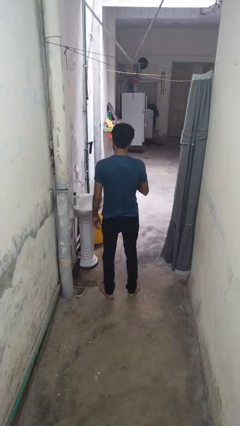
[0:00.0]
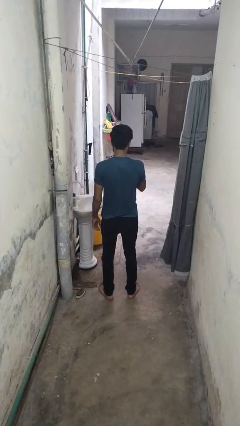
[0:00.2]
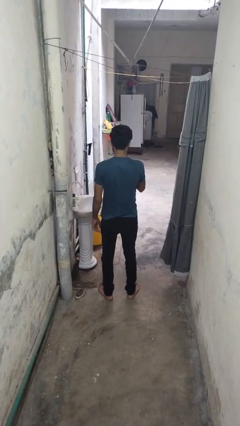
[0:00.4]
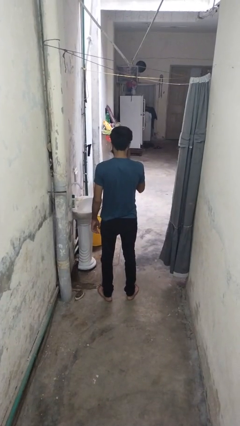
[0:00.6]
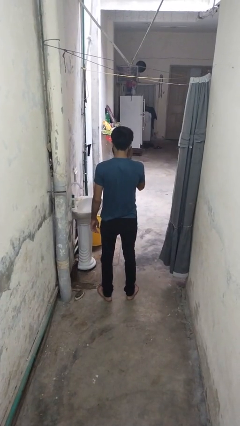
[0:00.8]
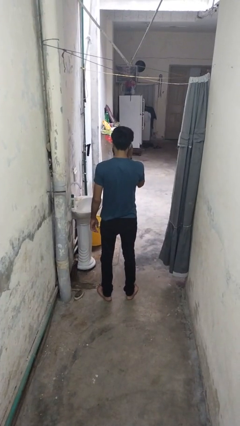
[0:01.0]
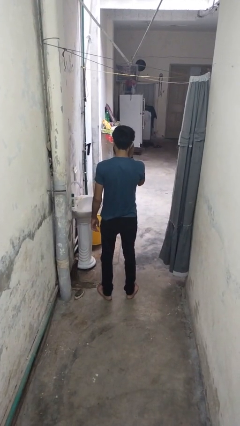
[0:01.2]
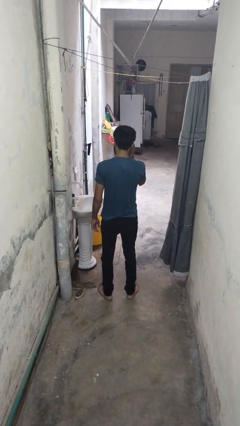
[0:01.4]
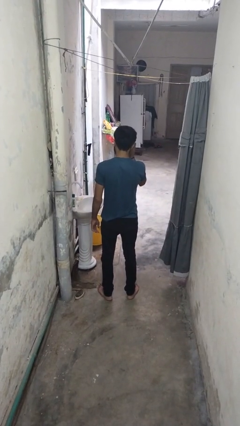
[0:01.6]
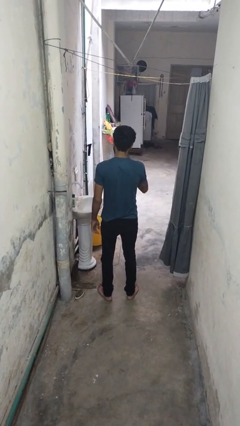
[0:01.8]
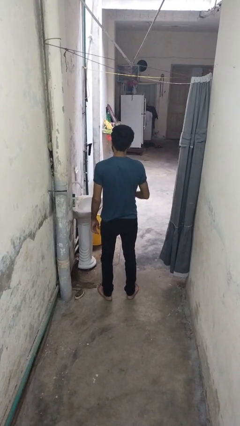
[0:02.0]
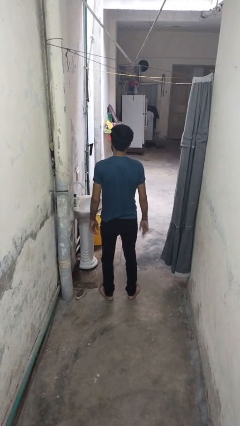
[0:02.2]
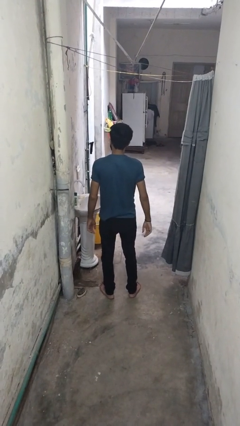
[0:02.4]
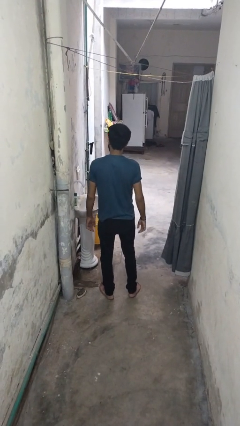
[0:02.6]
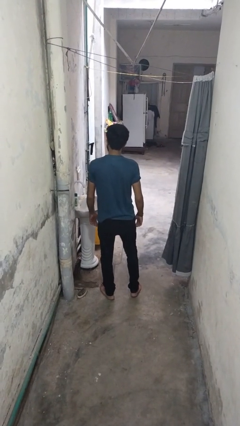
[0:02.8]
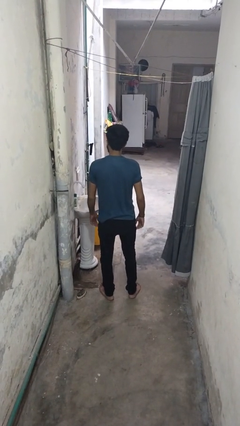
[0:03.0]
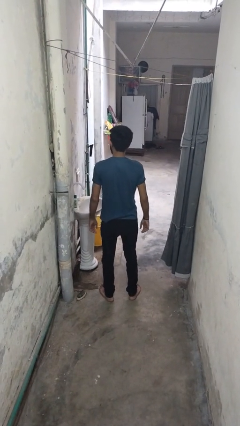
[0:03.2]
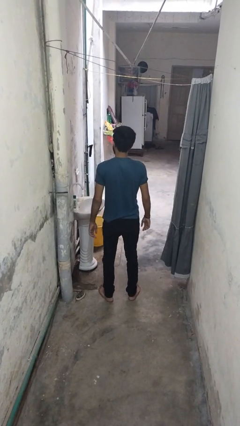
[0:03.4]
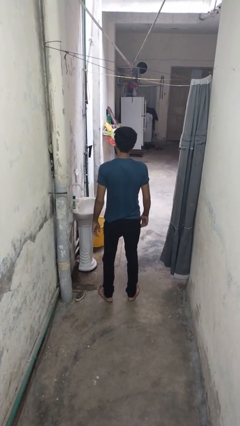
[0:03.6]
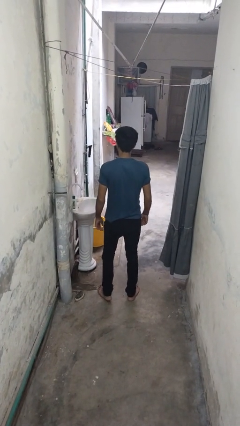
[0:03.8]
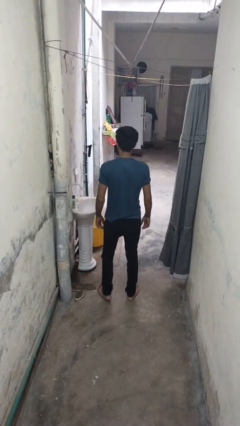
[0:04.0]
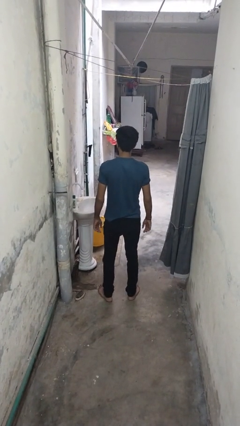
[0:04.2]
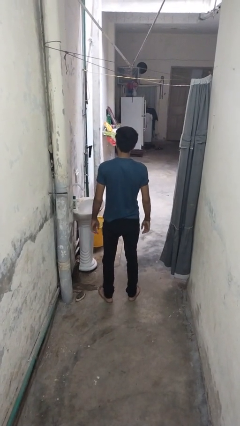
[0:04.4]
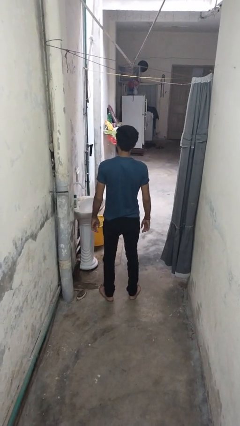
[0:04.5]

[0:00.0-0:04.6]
person puts on sunglasses

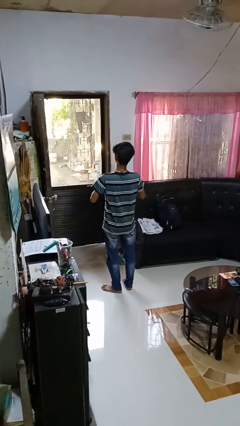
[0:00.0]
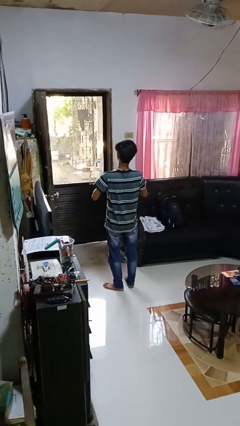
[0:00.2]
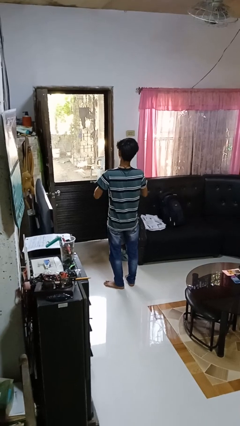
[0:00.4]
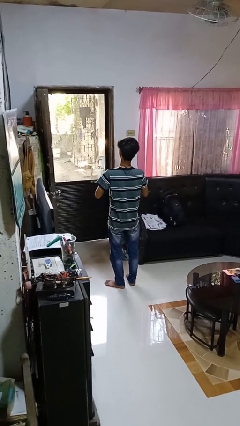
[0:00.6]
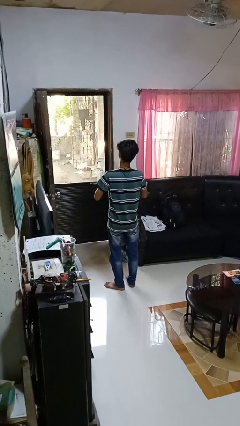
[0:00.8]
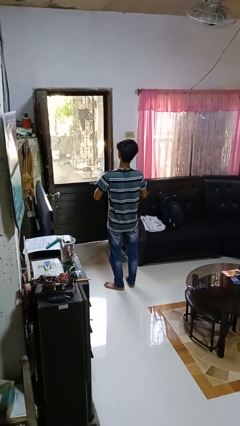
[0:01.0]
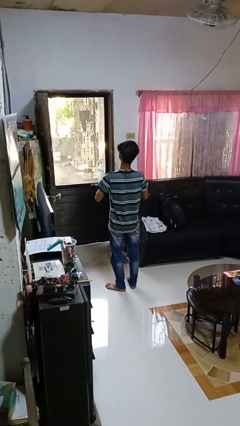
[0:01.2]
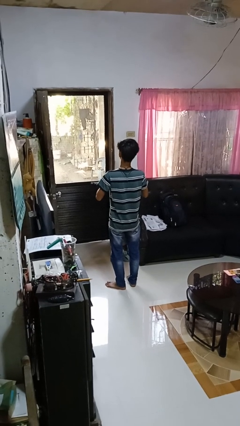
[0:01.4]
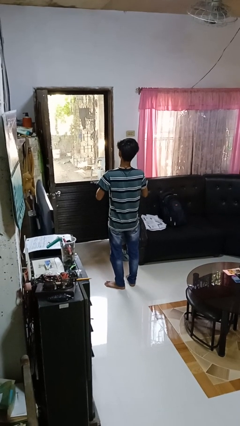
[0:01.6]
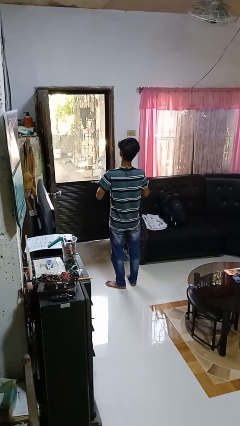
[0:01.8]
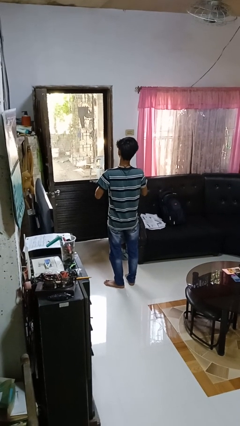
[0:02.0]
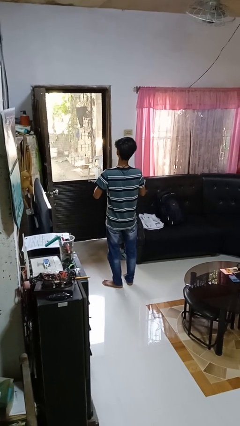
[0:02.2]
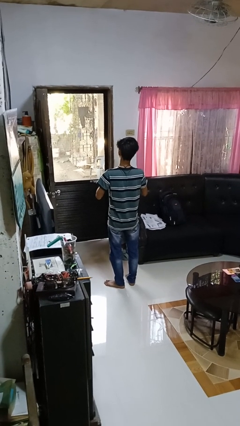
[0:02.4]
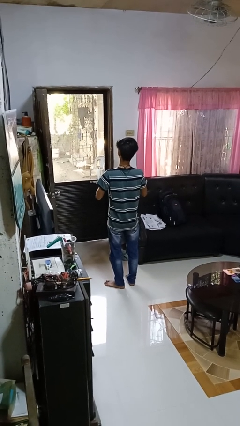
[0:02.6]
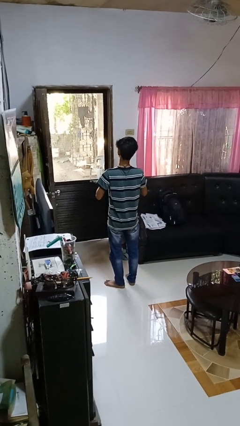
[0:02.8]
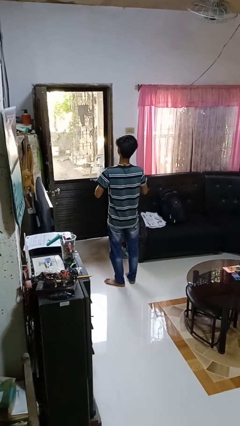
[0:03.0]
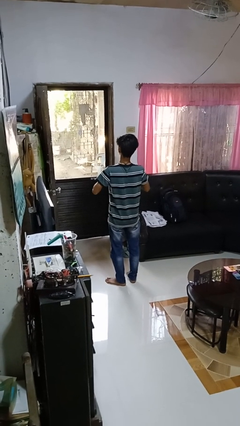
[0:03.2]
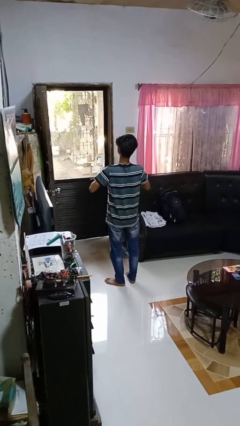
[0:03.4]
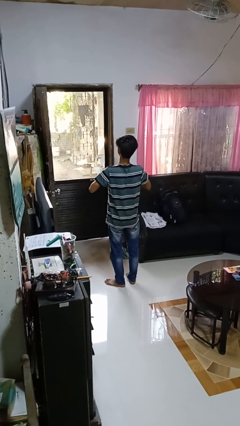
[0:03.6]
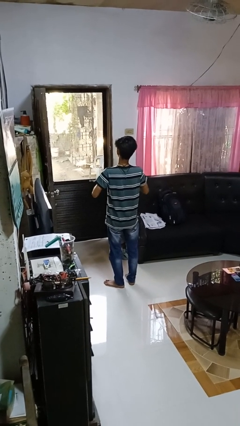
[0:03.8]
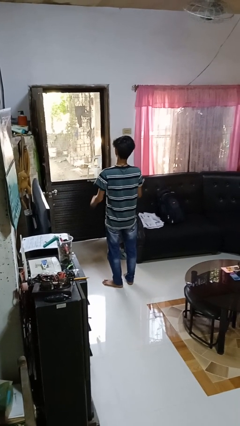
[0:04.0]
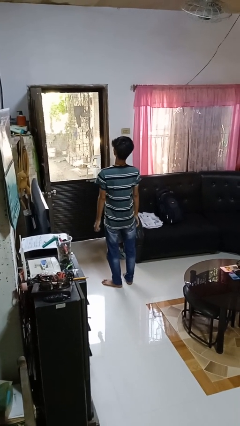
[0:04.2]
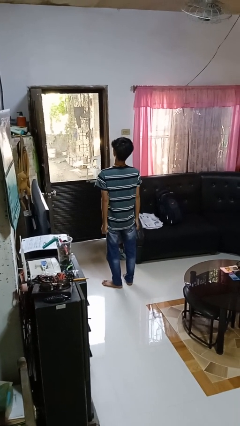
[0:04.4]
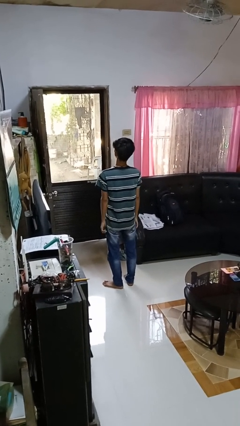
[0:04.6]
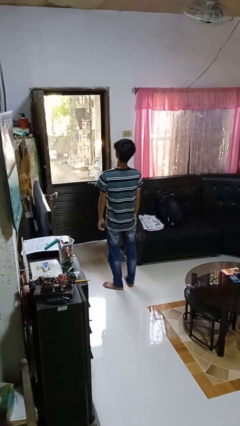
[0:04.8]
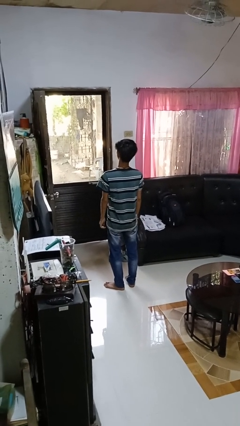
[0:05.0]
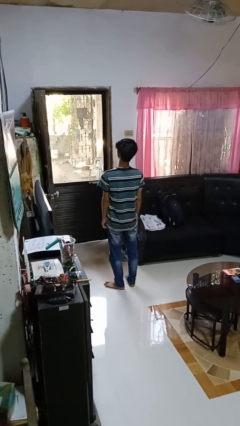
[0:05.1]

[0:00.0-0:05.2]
person unbuttons shirt

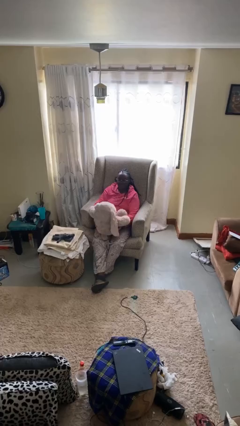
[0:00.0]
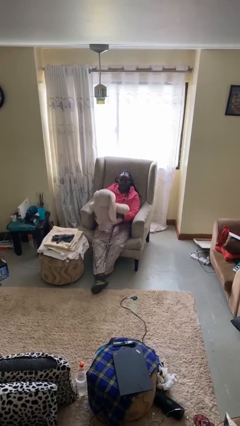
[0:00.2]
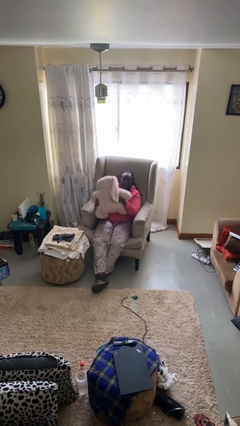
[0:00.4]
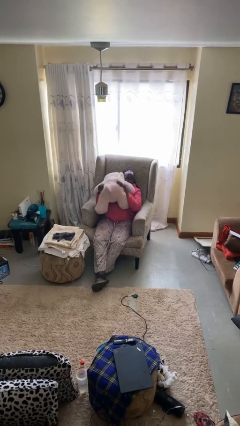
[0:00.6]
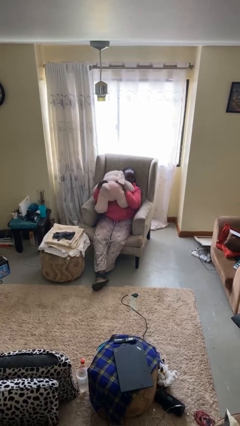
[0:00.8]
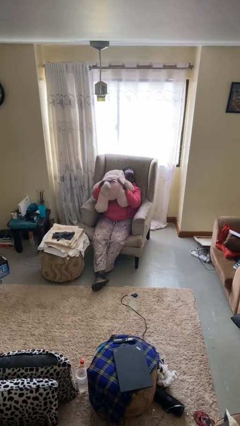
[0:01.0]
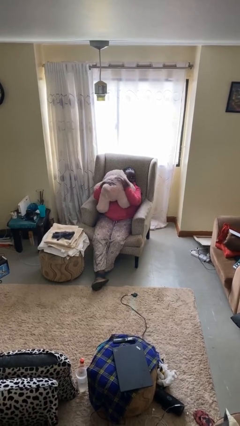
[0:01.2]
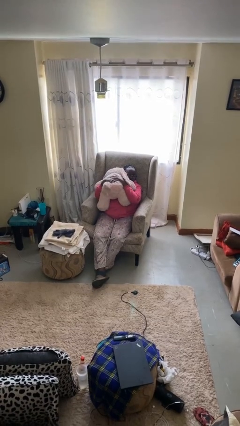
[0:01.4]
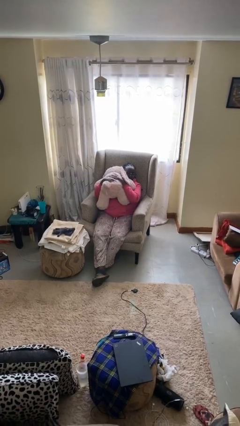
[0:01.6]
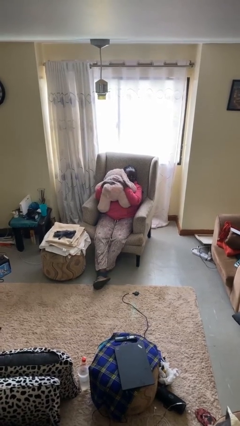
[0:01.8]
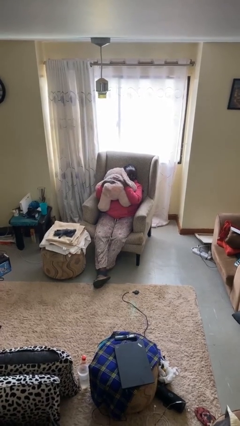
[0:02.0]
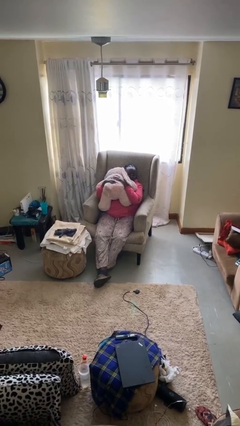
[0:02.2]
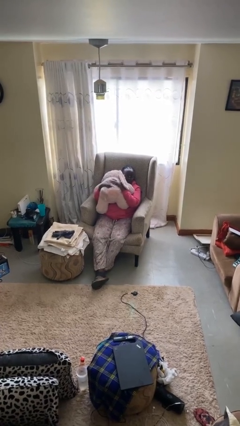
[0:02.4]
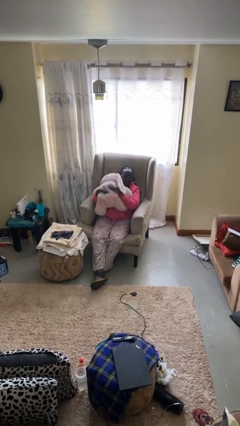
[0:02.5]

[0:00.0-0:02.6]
person hugs stuffed animal

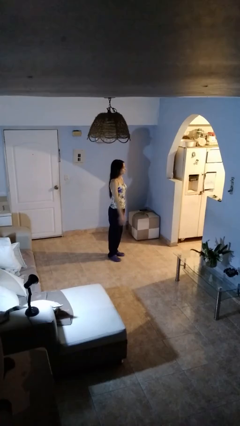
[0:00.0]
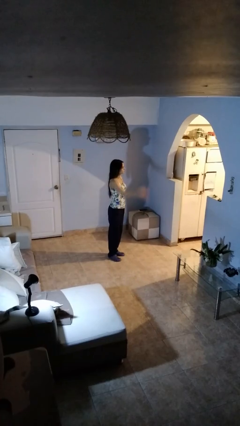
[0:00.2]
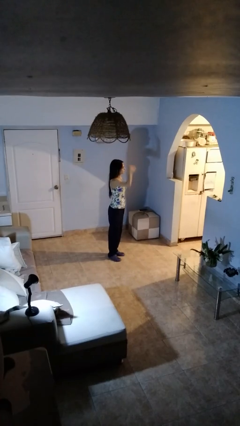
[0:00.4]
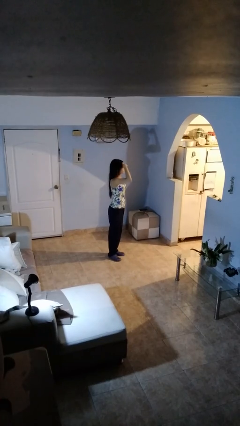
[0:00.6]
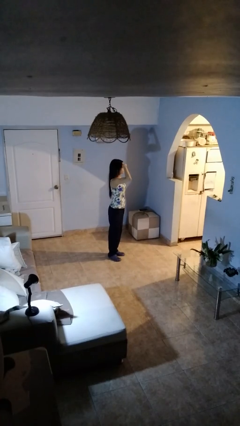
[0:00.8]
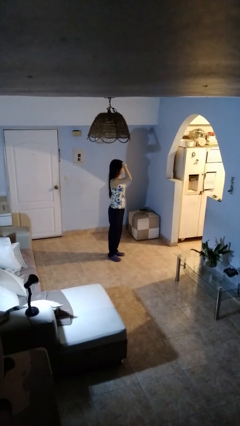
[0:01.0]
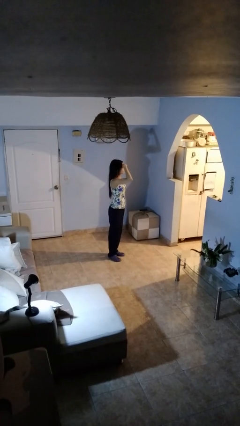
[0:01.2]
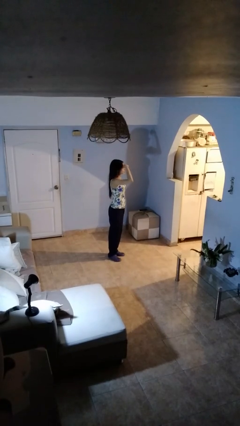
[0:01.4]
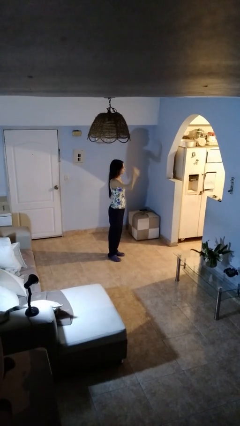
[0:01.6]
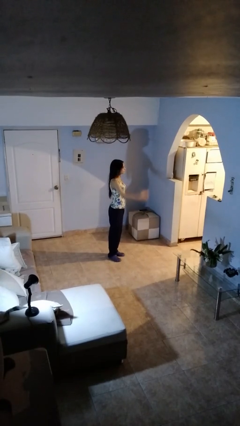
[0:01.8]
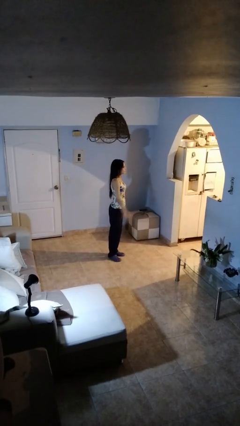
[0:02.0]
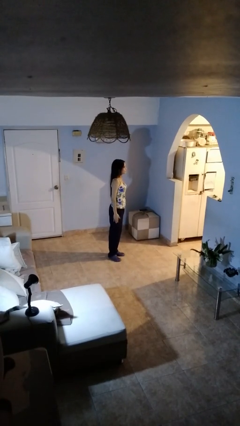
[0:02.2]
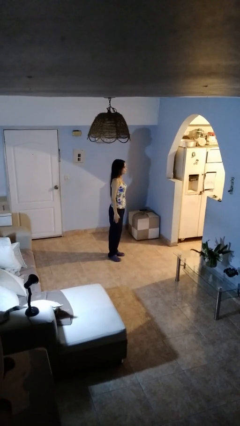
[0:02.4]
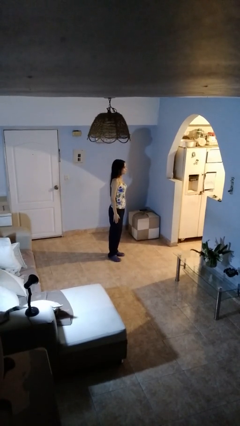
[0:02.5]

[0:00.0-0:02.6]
person salutes

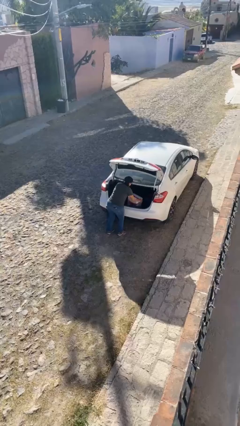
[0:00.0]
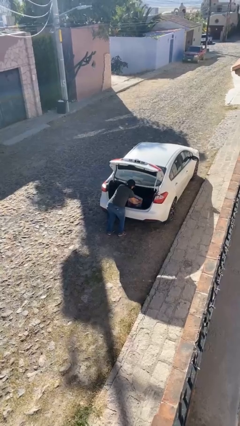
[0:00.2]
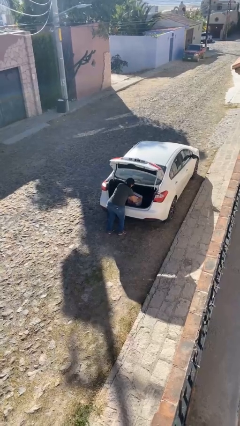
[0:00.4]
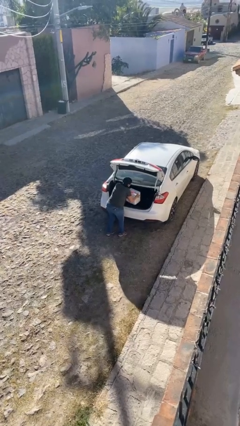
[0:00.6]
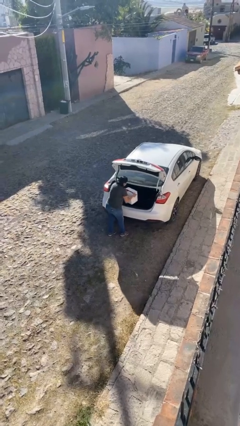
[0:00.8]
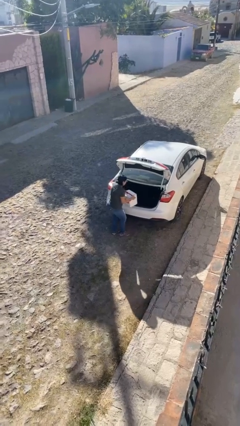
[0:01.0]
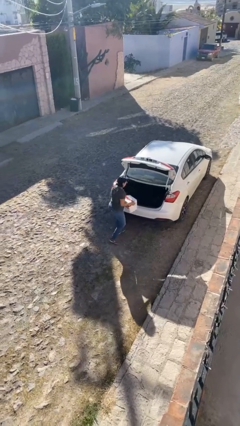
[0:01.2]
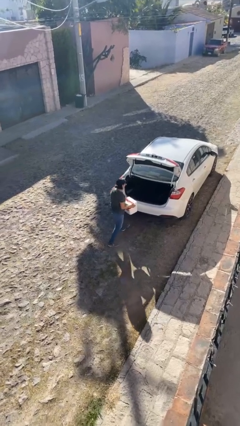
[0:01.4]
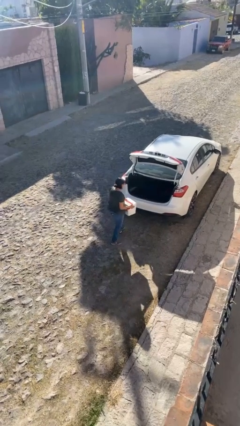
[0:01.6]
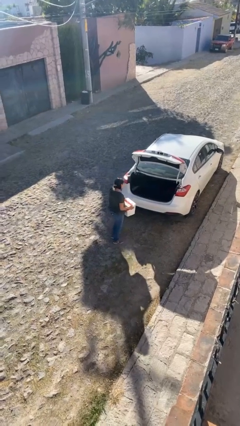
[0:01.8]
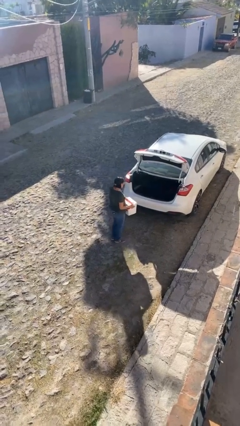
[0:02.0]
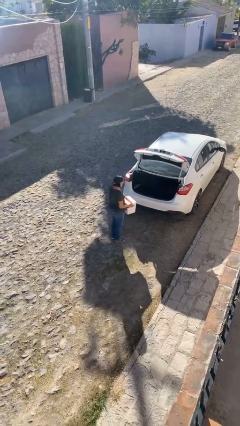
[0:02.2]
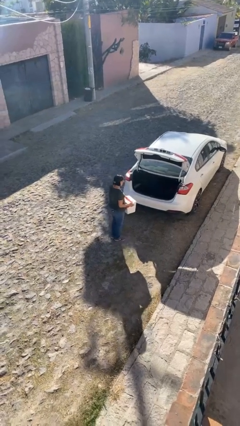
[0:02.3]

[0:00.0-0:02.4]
person unloads car
